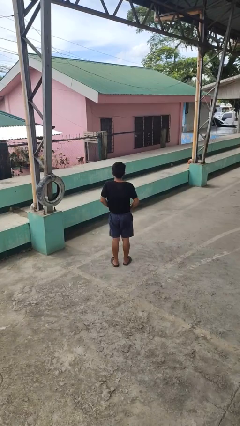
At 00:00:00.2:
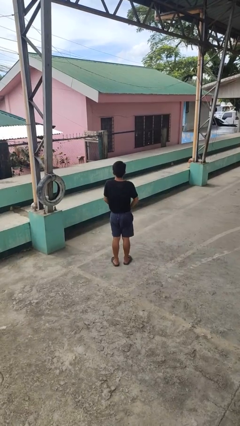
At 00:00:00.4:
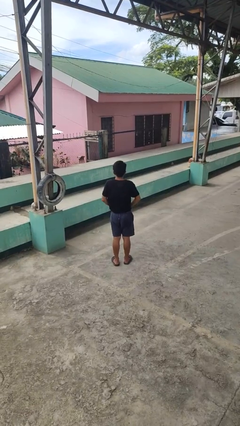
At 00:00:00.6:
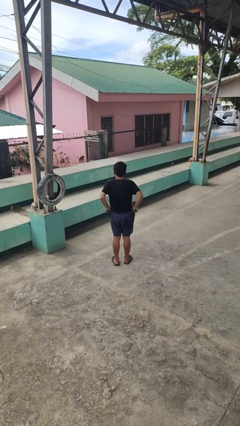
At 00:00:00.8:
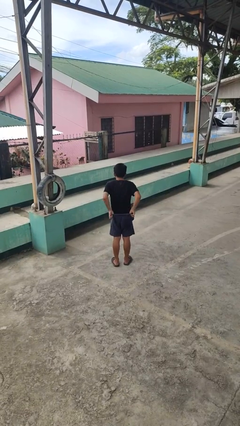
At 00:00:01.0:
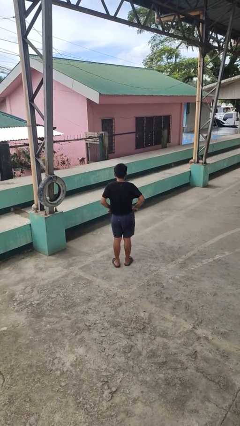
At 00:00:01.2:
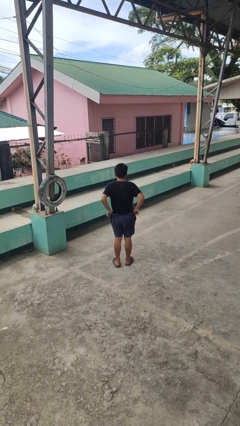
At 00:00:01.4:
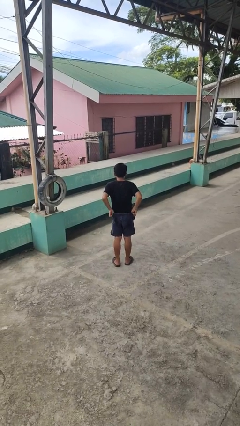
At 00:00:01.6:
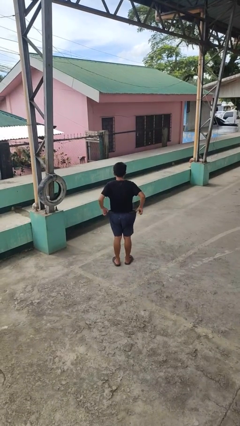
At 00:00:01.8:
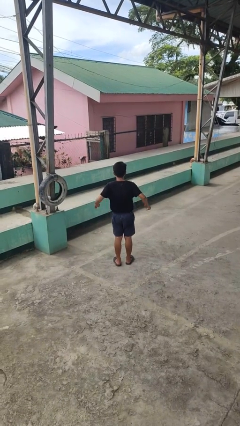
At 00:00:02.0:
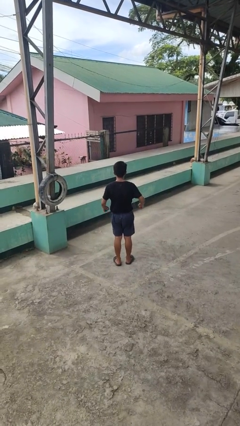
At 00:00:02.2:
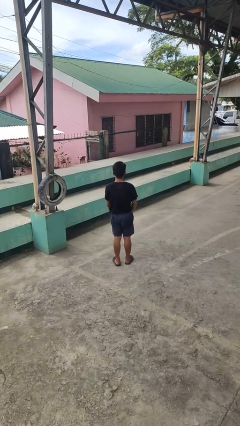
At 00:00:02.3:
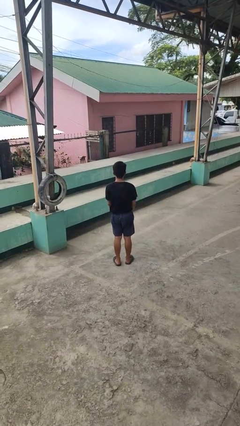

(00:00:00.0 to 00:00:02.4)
person hikes up pants

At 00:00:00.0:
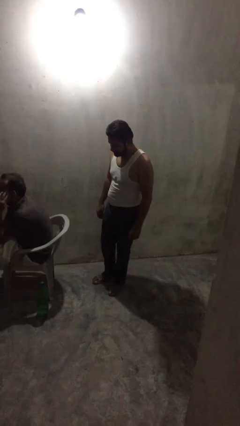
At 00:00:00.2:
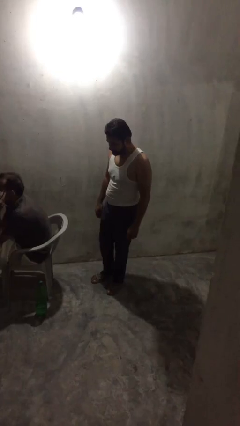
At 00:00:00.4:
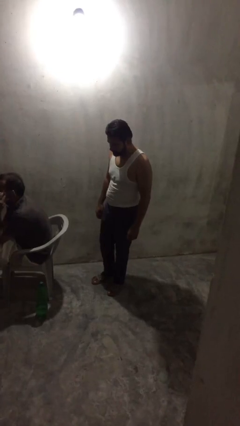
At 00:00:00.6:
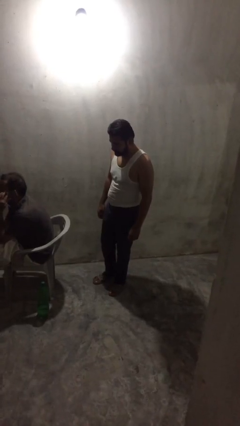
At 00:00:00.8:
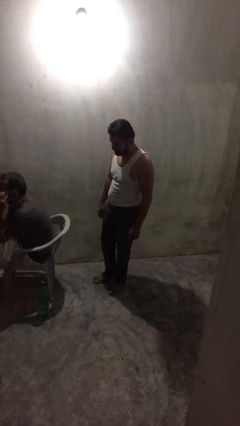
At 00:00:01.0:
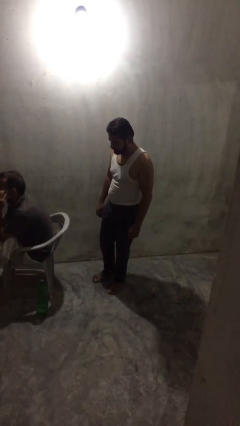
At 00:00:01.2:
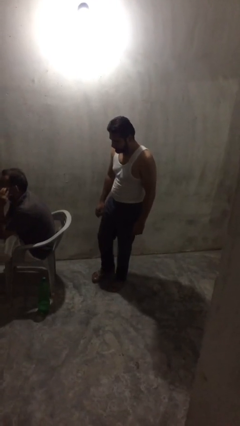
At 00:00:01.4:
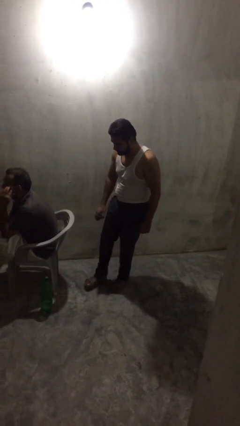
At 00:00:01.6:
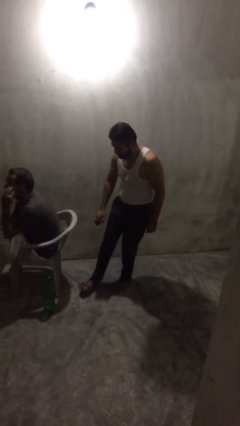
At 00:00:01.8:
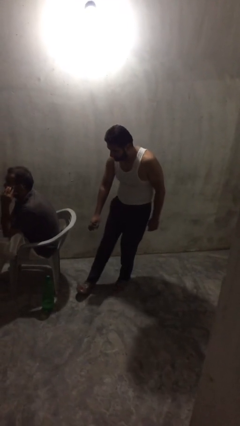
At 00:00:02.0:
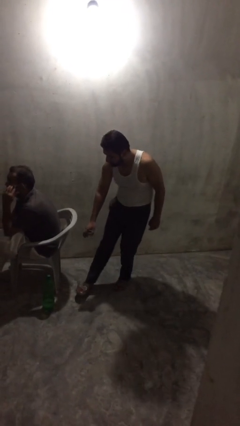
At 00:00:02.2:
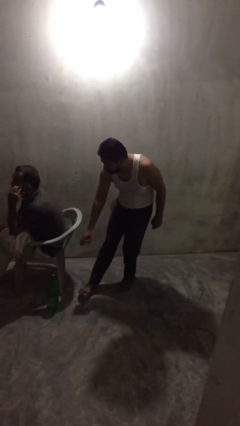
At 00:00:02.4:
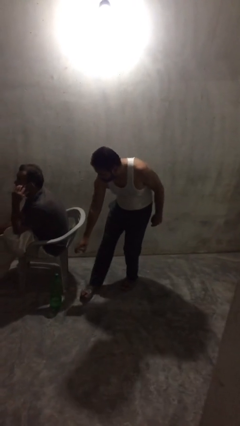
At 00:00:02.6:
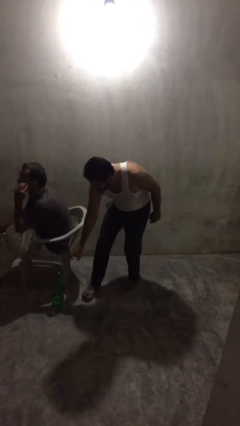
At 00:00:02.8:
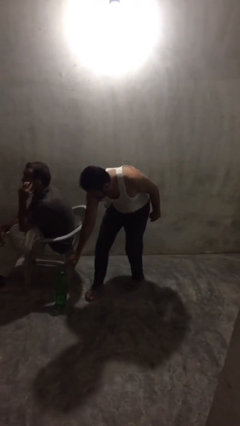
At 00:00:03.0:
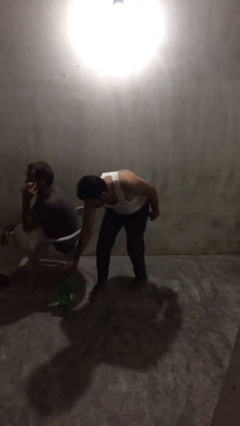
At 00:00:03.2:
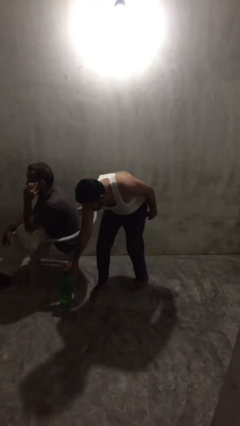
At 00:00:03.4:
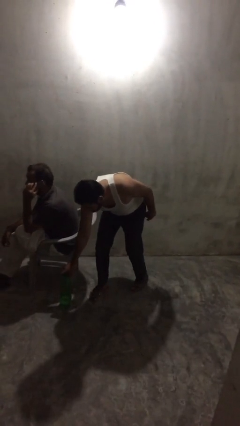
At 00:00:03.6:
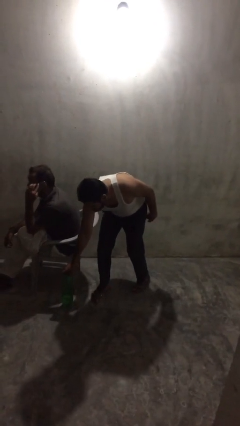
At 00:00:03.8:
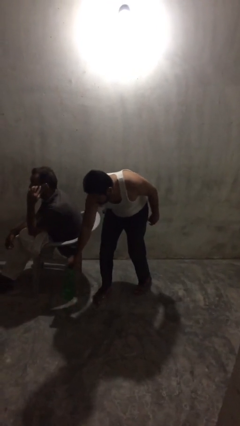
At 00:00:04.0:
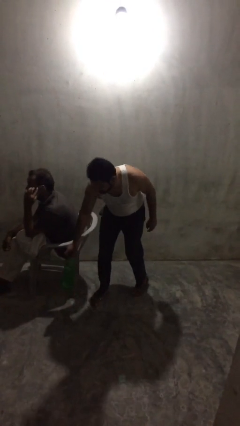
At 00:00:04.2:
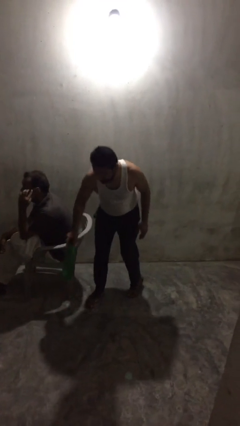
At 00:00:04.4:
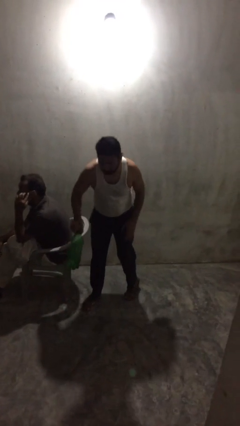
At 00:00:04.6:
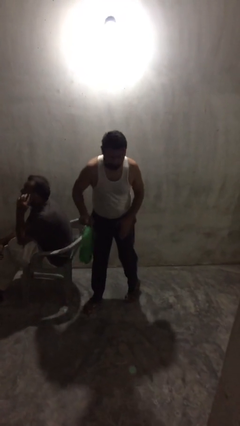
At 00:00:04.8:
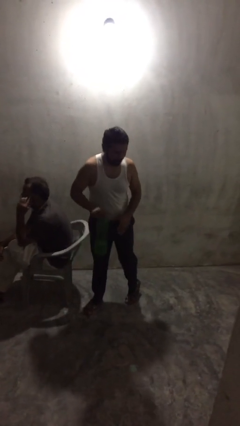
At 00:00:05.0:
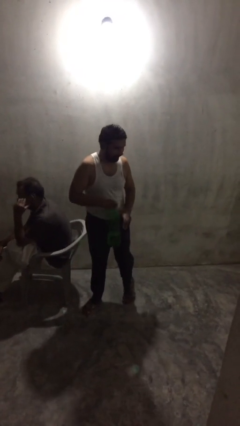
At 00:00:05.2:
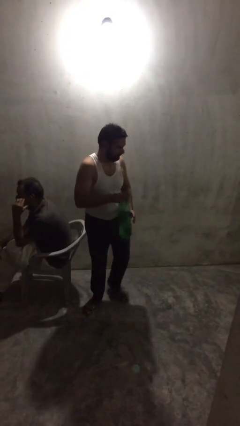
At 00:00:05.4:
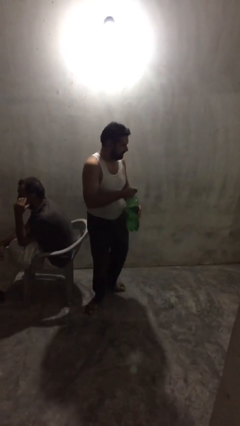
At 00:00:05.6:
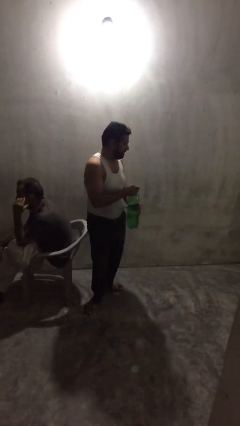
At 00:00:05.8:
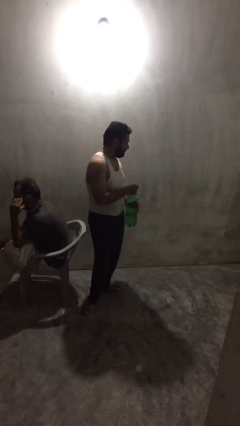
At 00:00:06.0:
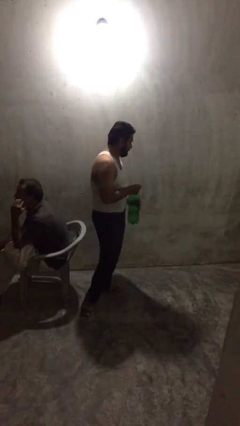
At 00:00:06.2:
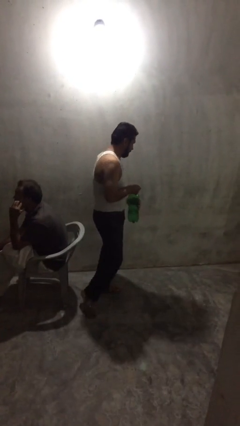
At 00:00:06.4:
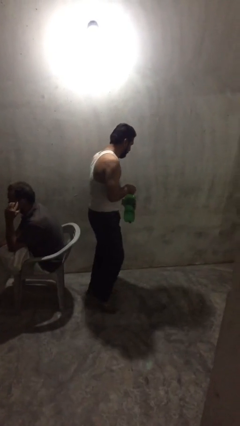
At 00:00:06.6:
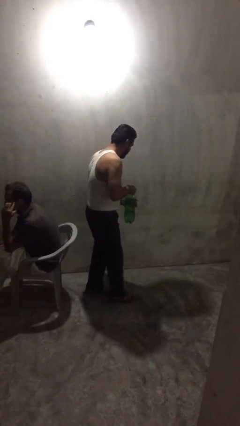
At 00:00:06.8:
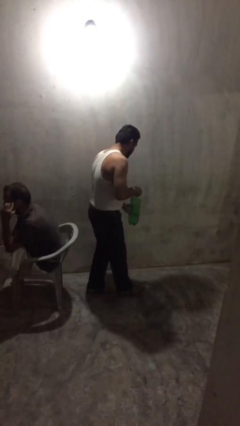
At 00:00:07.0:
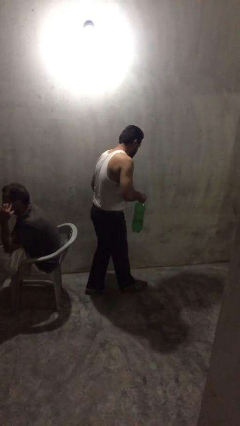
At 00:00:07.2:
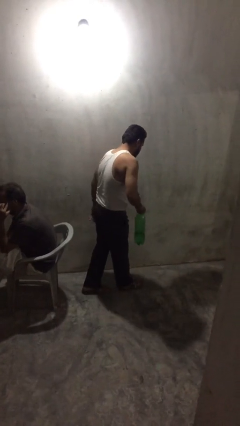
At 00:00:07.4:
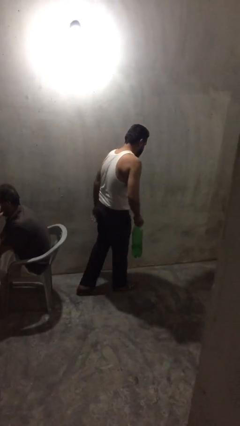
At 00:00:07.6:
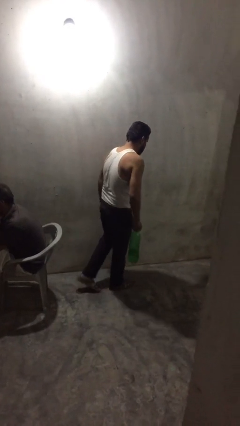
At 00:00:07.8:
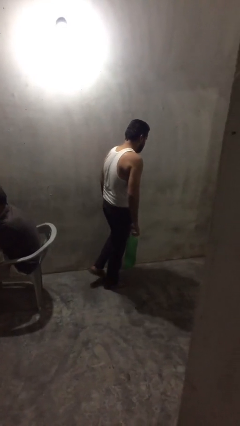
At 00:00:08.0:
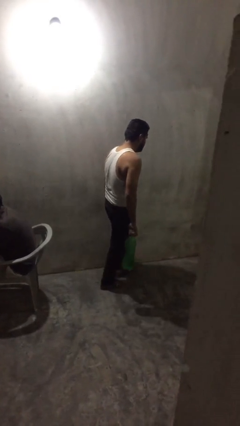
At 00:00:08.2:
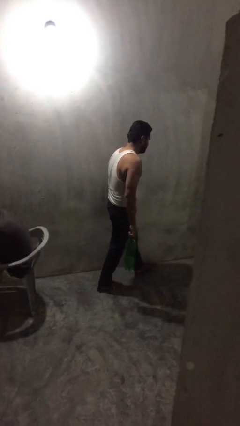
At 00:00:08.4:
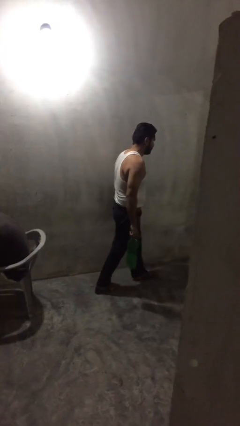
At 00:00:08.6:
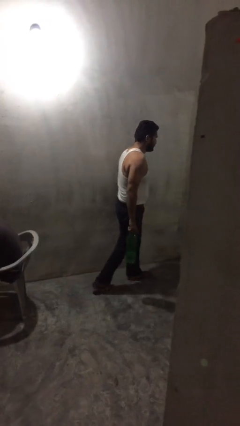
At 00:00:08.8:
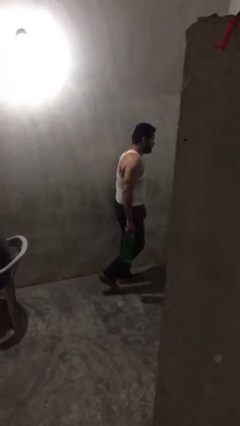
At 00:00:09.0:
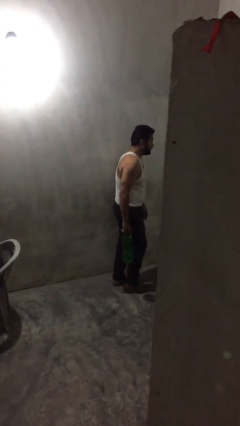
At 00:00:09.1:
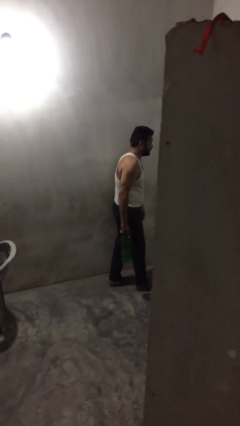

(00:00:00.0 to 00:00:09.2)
person steals object from person

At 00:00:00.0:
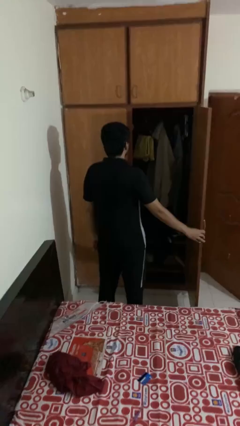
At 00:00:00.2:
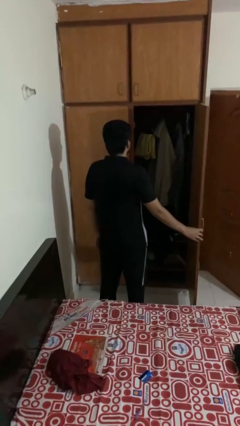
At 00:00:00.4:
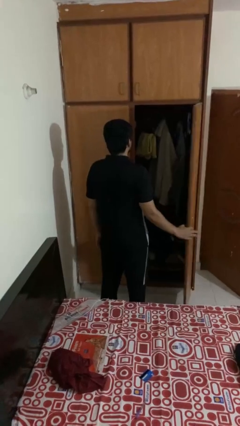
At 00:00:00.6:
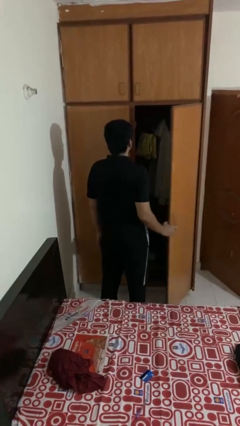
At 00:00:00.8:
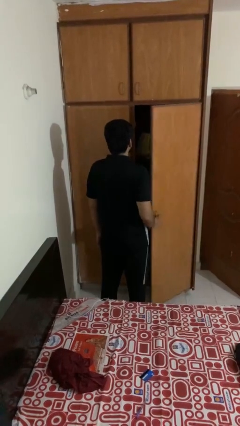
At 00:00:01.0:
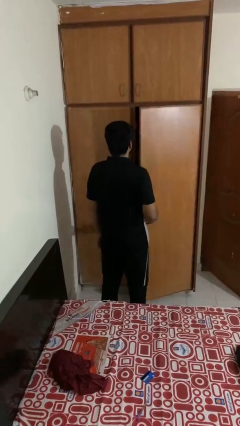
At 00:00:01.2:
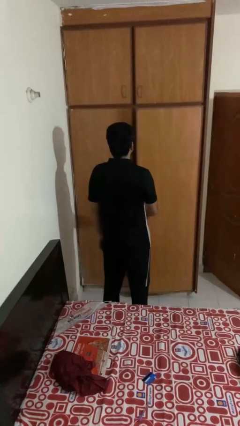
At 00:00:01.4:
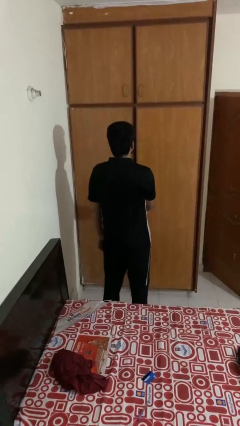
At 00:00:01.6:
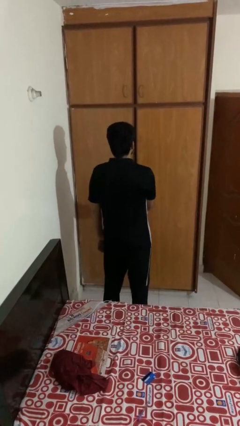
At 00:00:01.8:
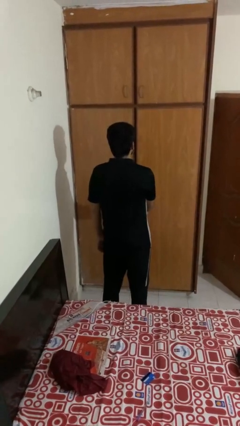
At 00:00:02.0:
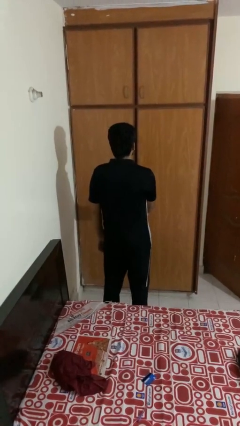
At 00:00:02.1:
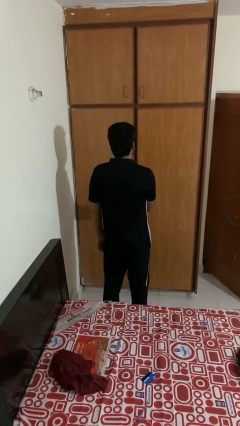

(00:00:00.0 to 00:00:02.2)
person closes closet door

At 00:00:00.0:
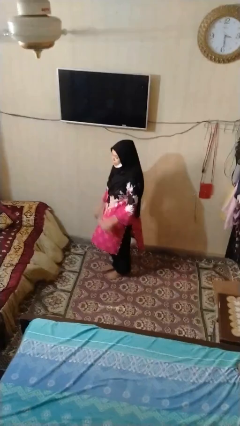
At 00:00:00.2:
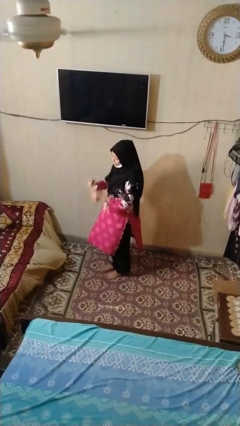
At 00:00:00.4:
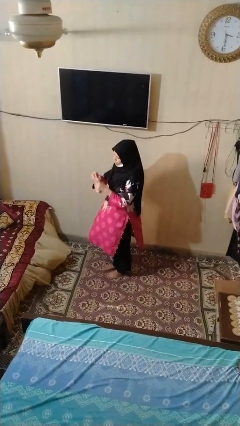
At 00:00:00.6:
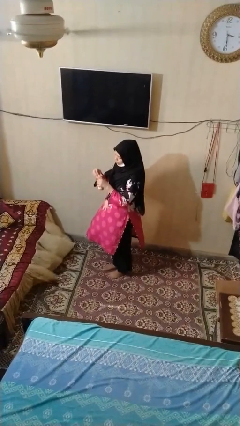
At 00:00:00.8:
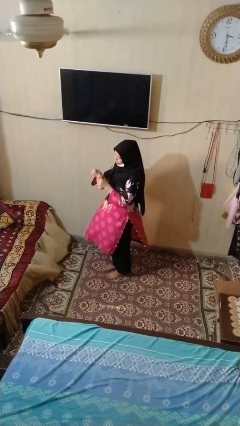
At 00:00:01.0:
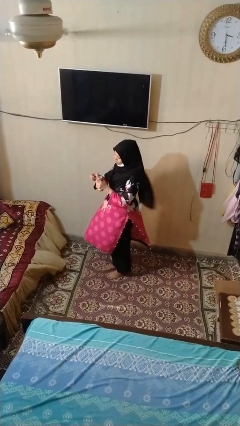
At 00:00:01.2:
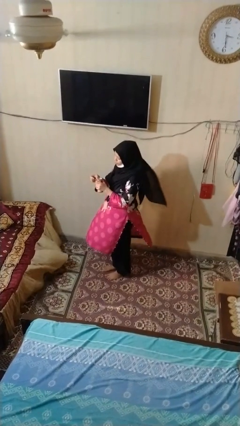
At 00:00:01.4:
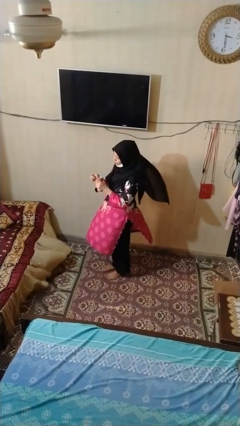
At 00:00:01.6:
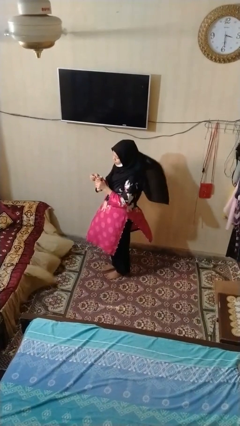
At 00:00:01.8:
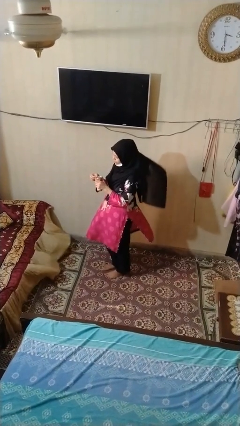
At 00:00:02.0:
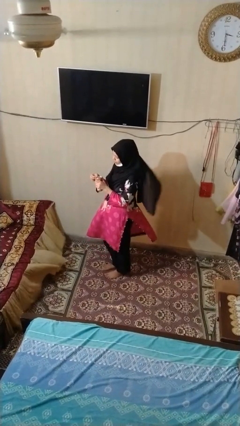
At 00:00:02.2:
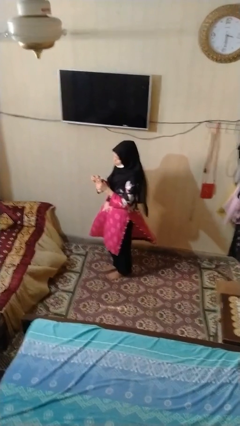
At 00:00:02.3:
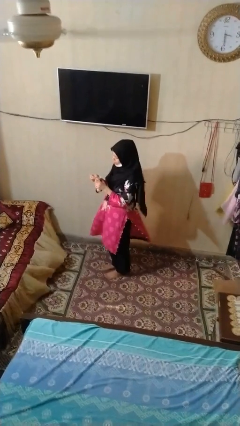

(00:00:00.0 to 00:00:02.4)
person opens beverage can

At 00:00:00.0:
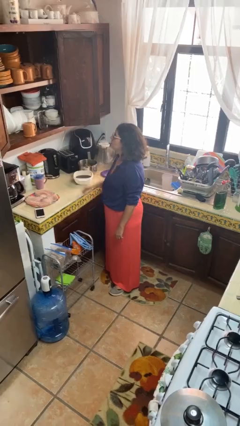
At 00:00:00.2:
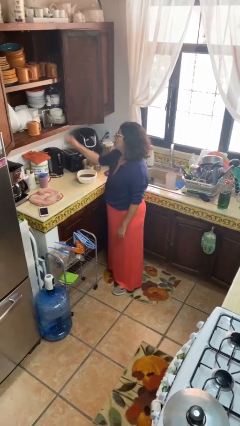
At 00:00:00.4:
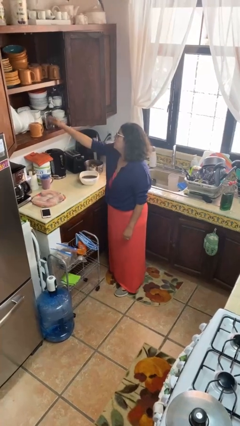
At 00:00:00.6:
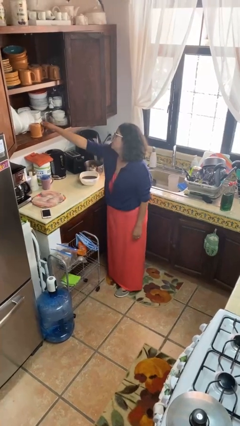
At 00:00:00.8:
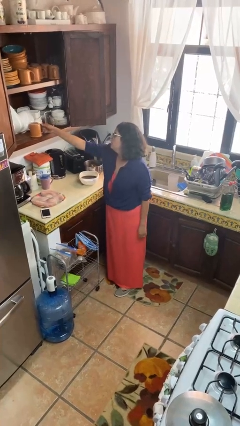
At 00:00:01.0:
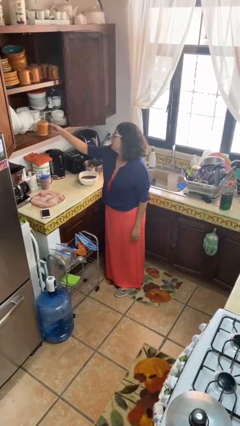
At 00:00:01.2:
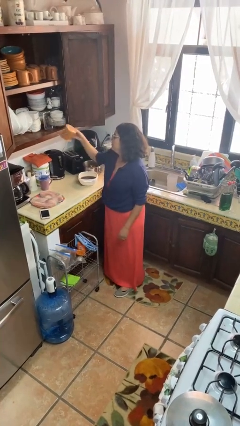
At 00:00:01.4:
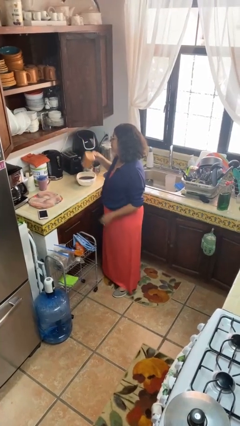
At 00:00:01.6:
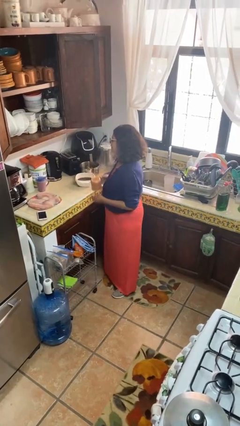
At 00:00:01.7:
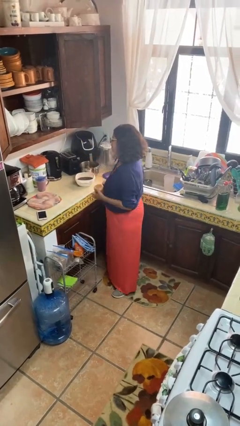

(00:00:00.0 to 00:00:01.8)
person picks up object from cabinet
